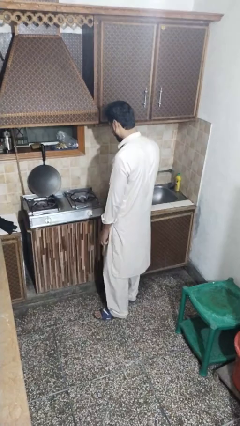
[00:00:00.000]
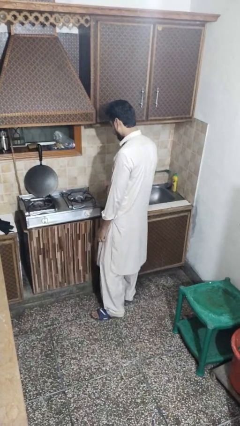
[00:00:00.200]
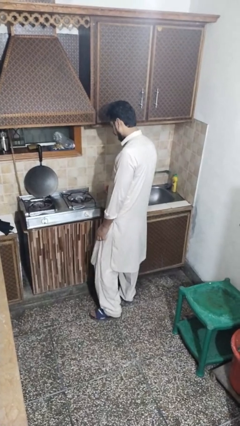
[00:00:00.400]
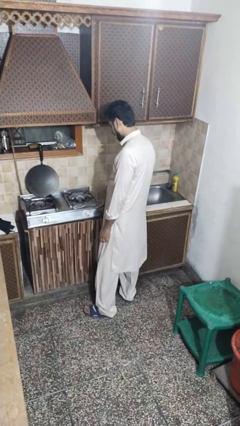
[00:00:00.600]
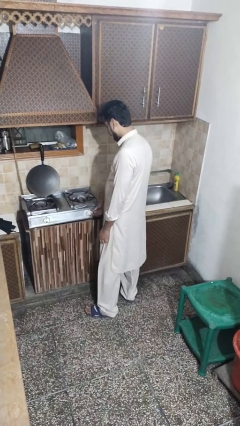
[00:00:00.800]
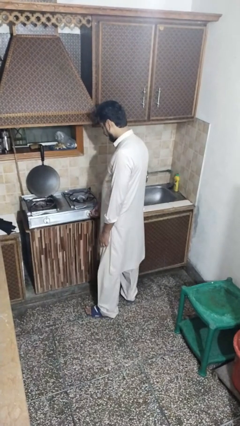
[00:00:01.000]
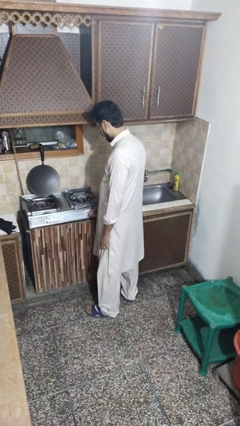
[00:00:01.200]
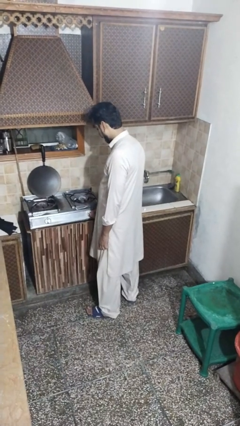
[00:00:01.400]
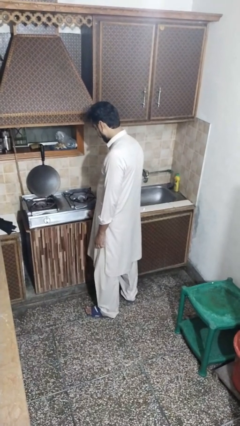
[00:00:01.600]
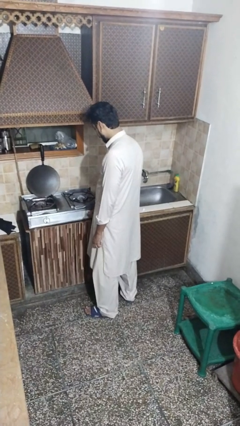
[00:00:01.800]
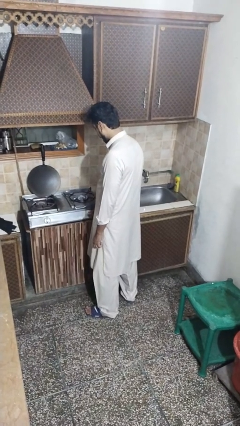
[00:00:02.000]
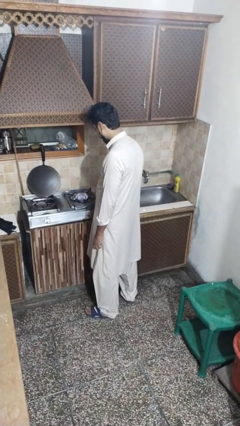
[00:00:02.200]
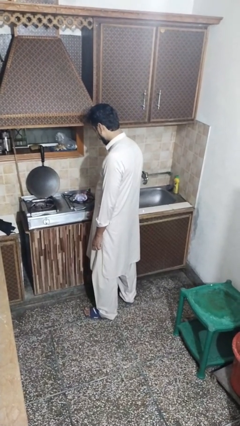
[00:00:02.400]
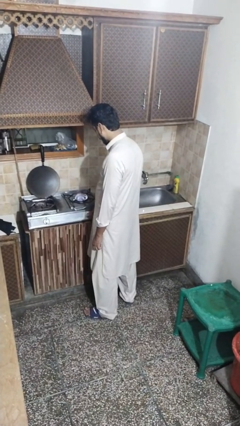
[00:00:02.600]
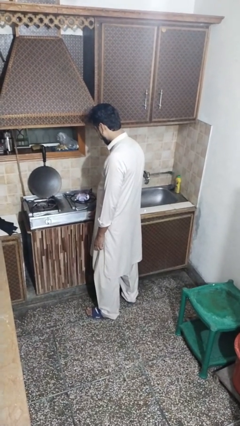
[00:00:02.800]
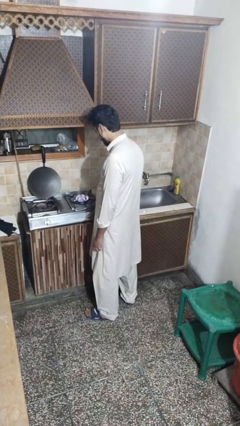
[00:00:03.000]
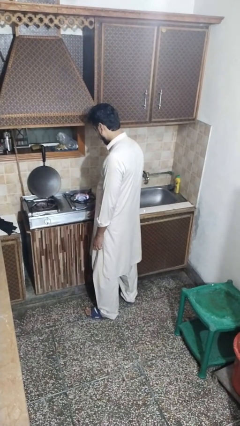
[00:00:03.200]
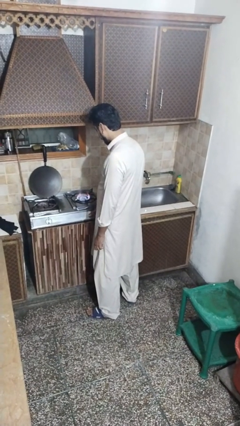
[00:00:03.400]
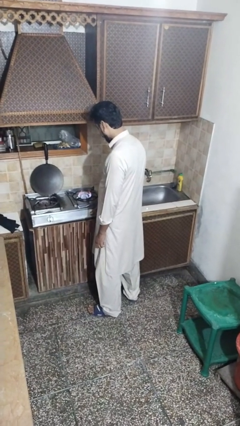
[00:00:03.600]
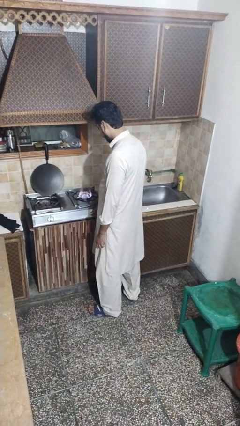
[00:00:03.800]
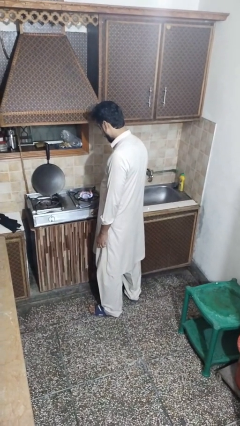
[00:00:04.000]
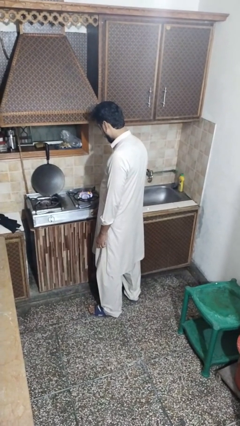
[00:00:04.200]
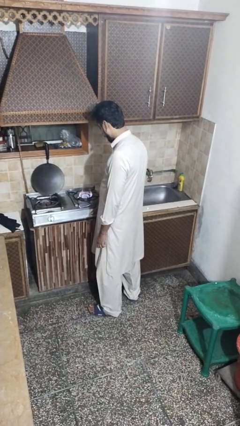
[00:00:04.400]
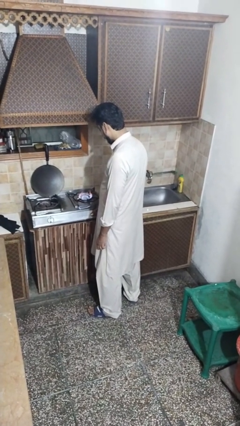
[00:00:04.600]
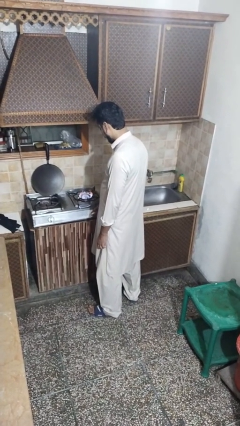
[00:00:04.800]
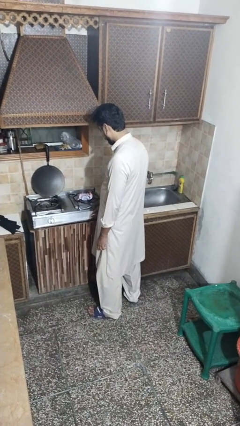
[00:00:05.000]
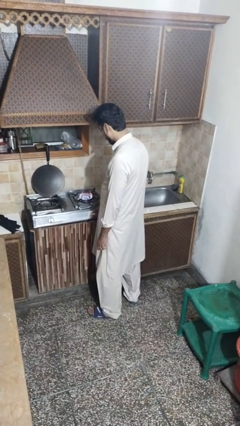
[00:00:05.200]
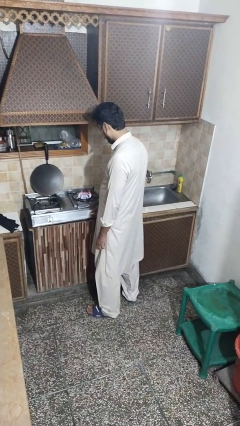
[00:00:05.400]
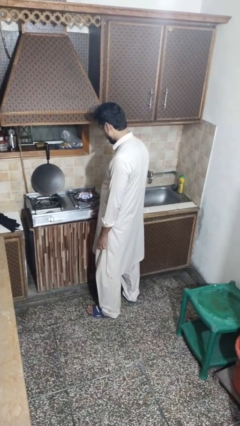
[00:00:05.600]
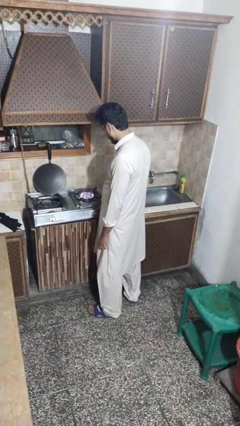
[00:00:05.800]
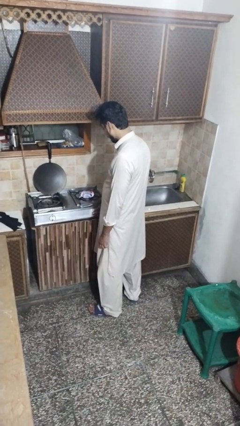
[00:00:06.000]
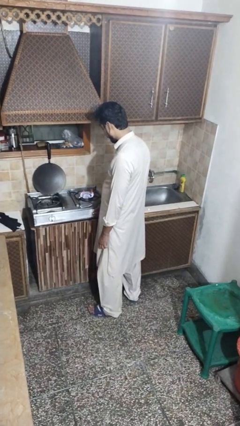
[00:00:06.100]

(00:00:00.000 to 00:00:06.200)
person turns on stovetop

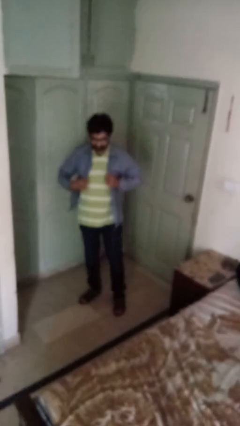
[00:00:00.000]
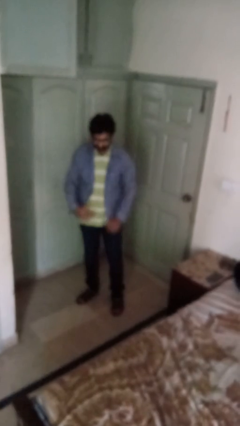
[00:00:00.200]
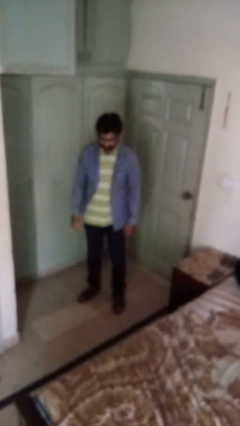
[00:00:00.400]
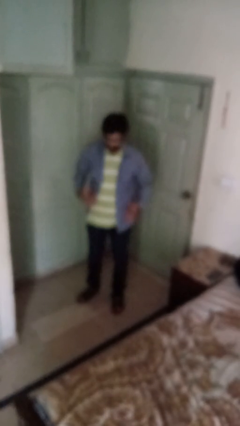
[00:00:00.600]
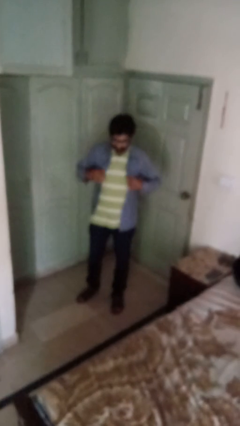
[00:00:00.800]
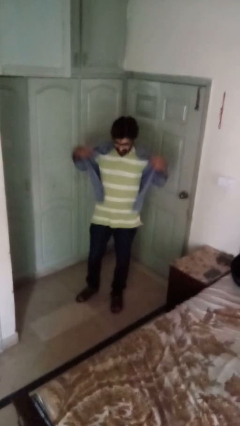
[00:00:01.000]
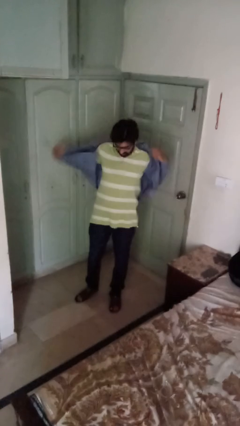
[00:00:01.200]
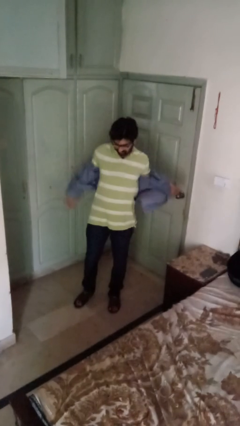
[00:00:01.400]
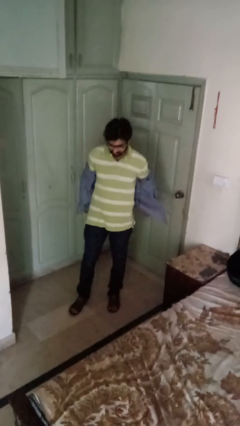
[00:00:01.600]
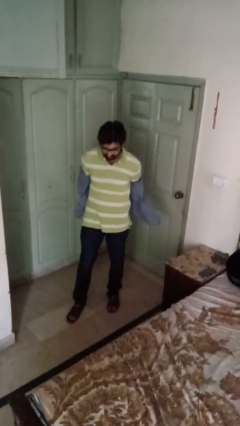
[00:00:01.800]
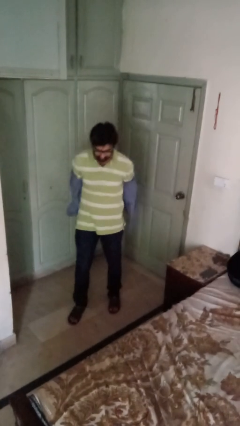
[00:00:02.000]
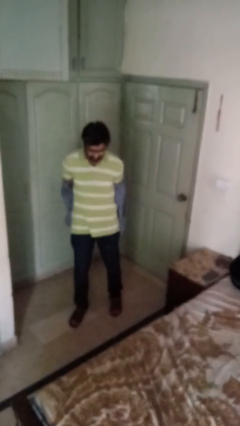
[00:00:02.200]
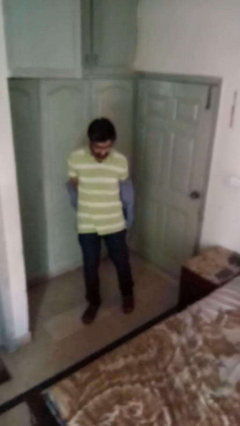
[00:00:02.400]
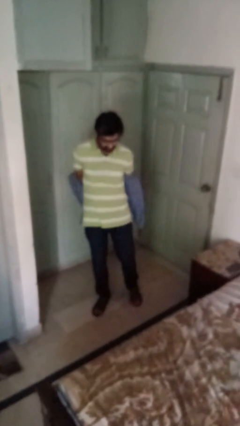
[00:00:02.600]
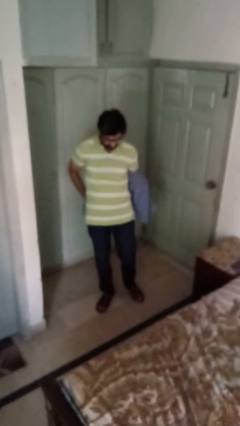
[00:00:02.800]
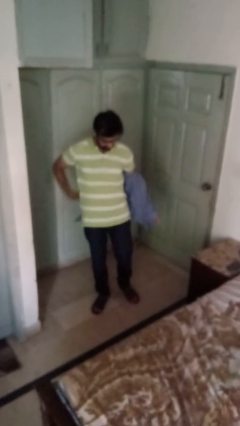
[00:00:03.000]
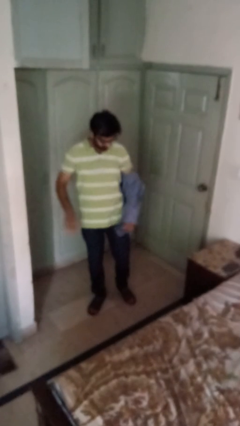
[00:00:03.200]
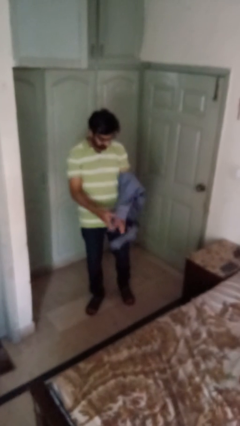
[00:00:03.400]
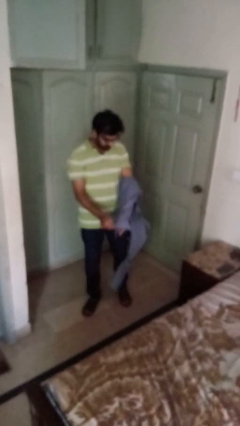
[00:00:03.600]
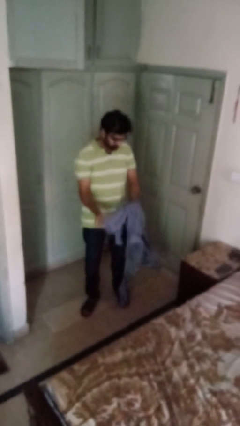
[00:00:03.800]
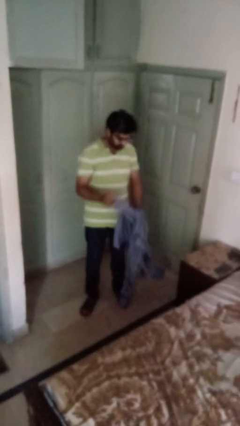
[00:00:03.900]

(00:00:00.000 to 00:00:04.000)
person takes off shirt

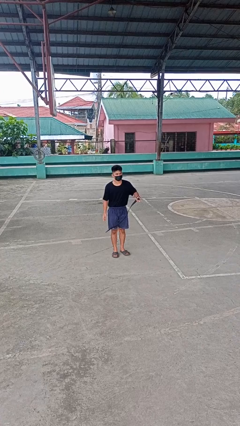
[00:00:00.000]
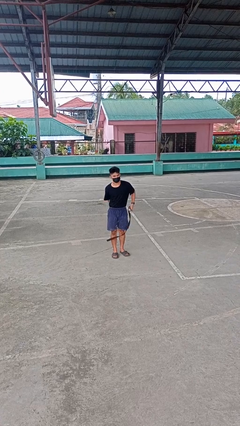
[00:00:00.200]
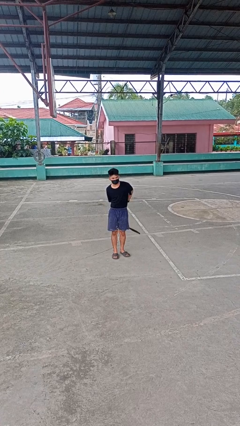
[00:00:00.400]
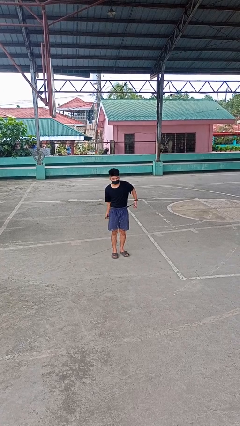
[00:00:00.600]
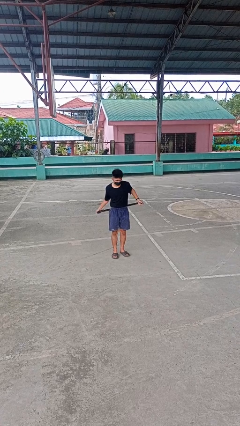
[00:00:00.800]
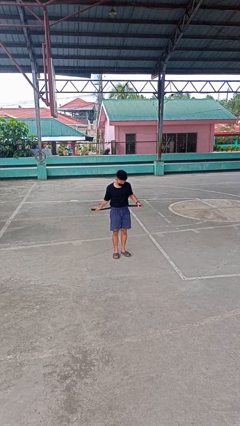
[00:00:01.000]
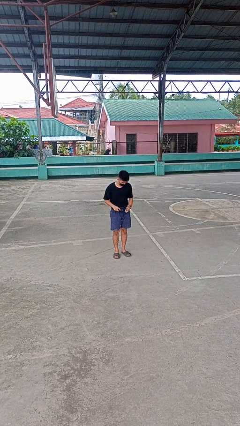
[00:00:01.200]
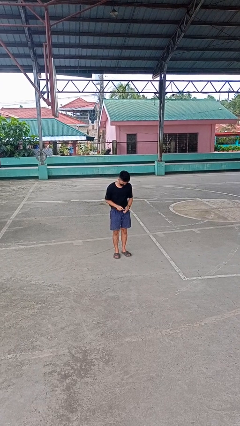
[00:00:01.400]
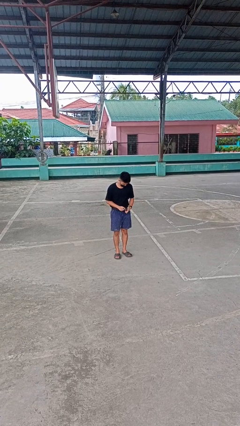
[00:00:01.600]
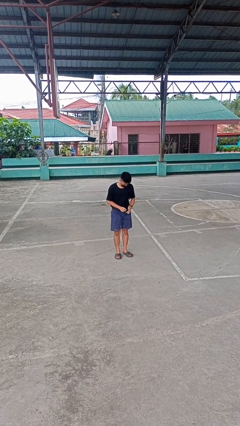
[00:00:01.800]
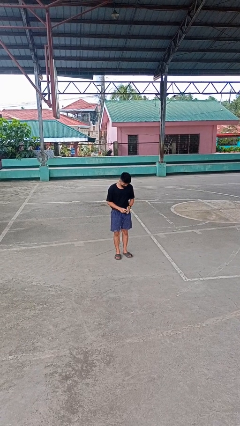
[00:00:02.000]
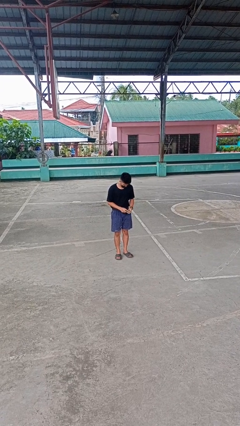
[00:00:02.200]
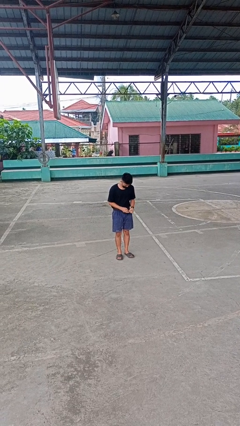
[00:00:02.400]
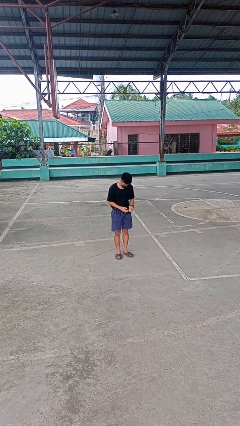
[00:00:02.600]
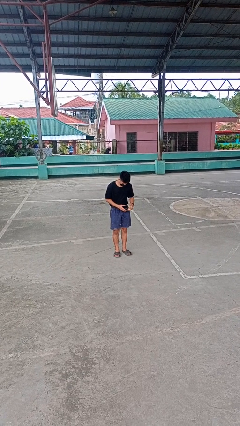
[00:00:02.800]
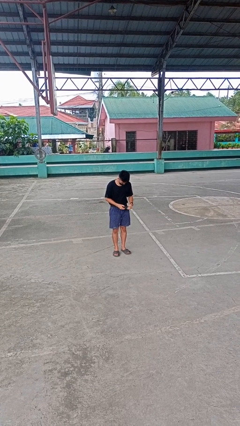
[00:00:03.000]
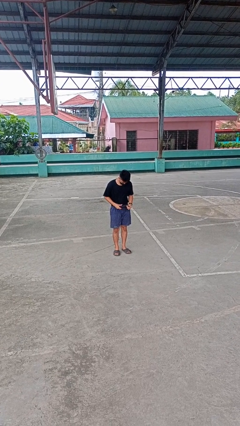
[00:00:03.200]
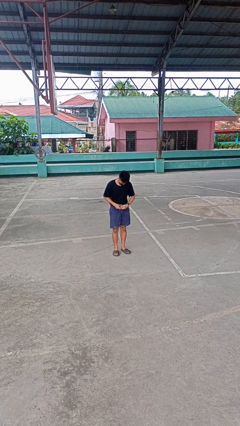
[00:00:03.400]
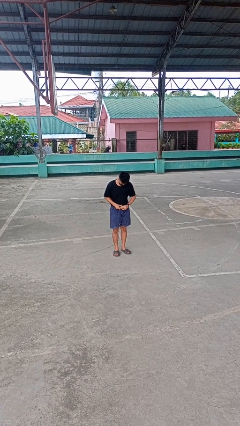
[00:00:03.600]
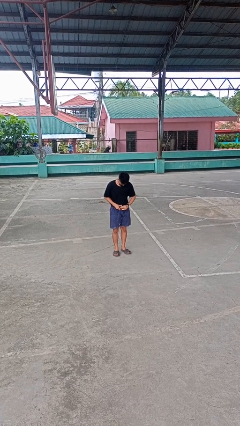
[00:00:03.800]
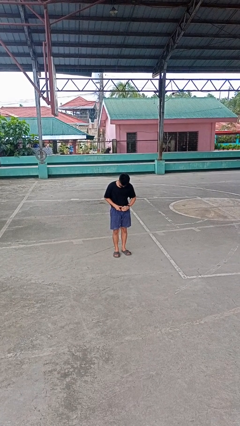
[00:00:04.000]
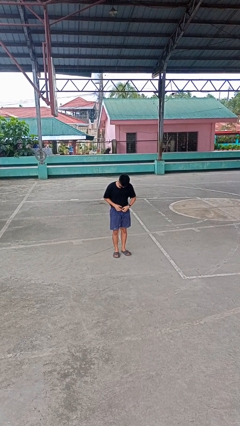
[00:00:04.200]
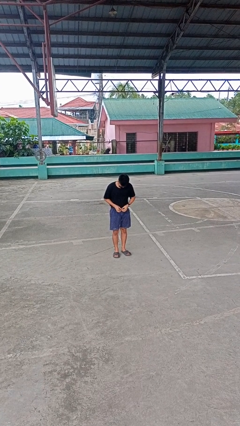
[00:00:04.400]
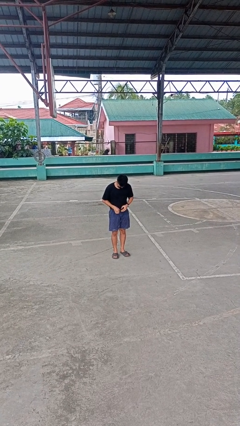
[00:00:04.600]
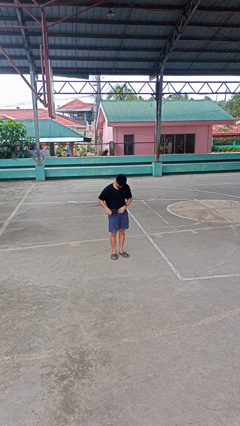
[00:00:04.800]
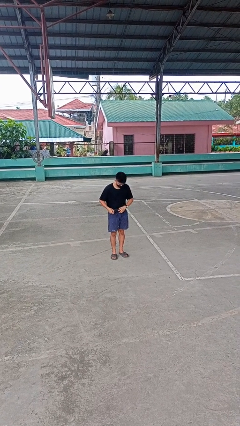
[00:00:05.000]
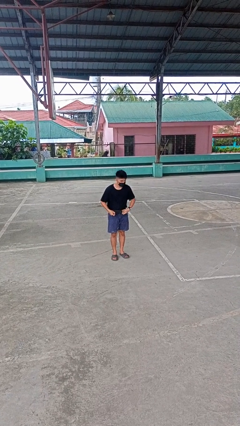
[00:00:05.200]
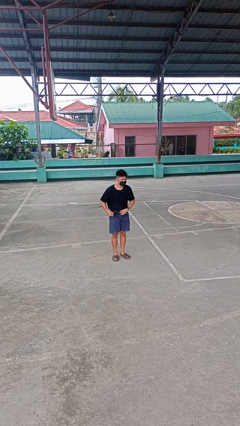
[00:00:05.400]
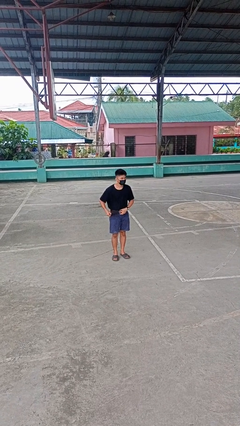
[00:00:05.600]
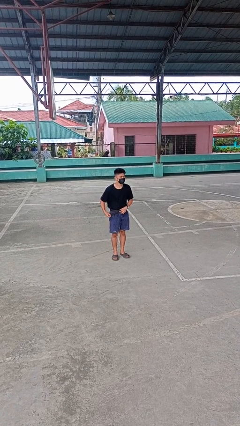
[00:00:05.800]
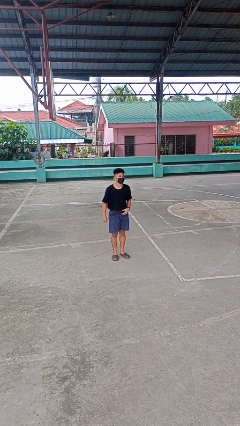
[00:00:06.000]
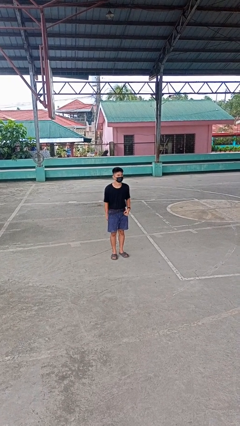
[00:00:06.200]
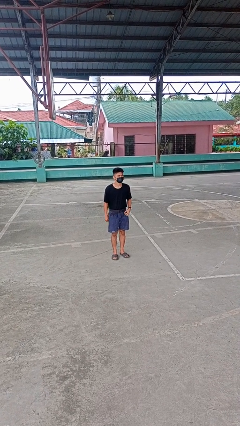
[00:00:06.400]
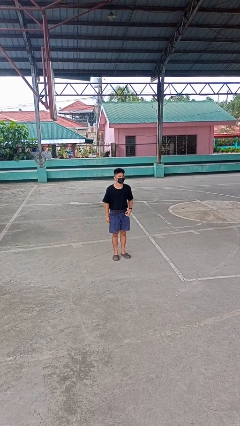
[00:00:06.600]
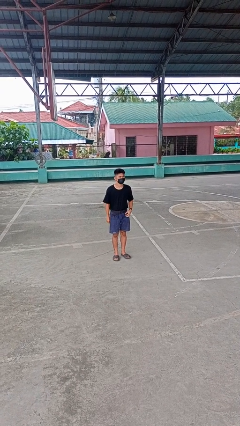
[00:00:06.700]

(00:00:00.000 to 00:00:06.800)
person puts on belt

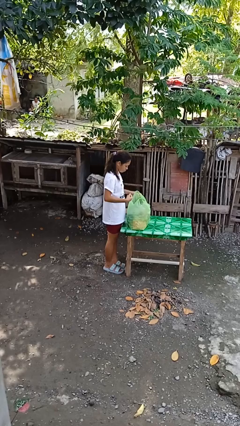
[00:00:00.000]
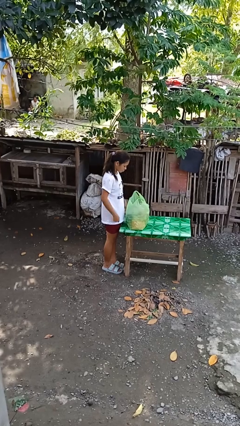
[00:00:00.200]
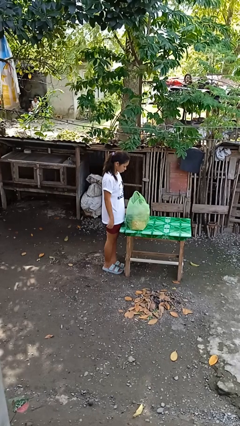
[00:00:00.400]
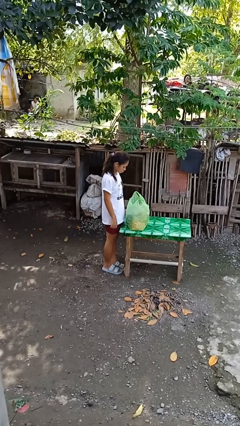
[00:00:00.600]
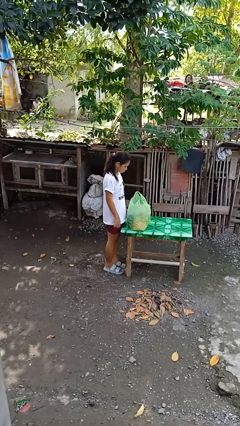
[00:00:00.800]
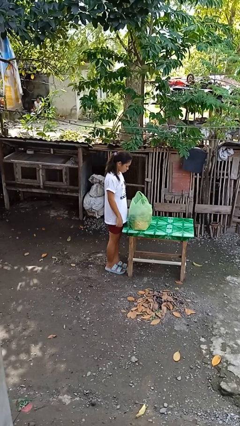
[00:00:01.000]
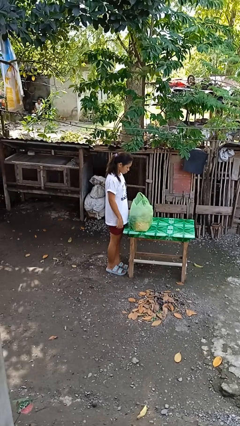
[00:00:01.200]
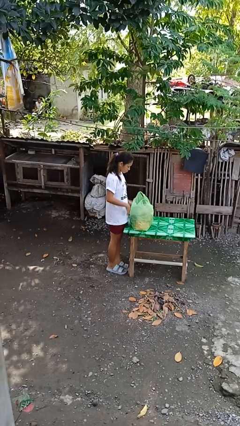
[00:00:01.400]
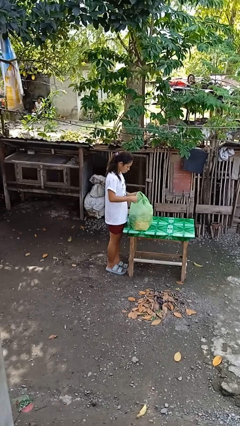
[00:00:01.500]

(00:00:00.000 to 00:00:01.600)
person hits person with pillow
